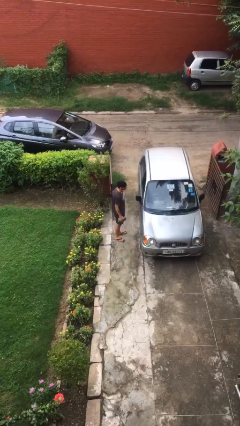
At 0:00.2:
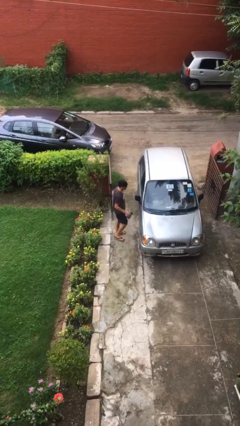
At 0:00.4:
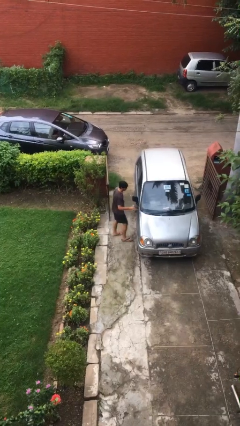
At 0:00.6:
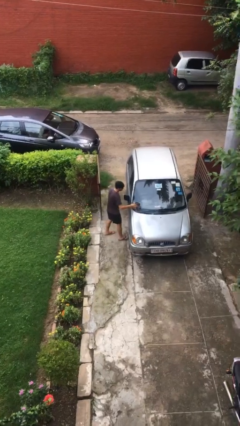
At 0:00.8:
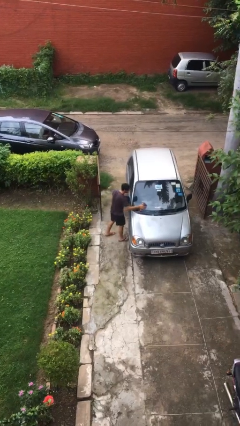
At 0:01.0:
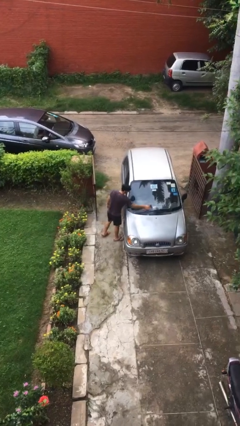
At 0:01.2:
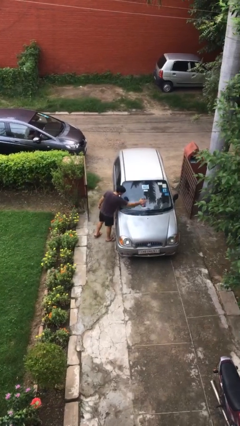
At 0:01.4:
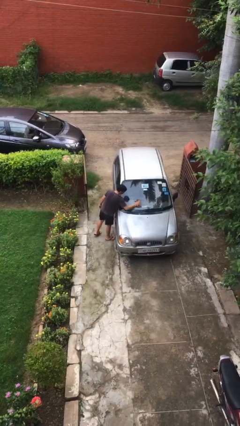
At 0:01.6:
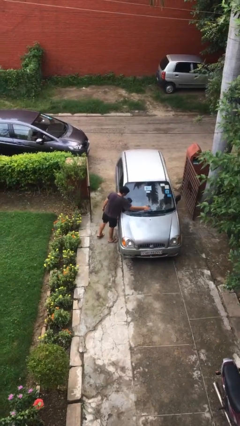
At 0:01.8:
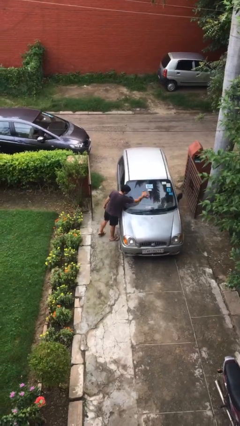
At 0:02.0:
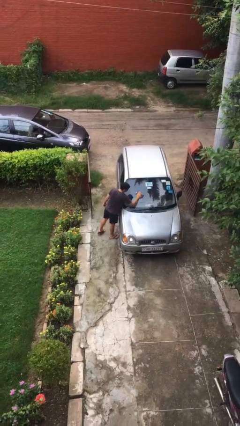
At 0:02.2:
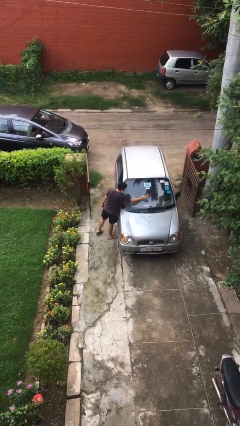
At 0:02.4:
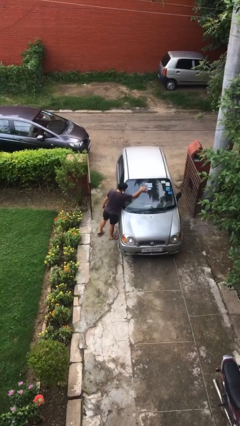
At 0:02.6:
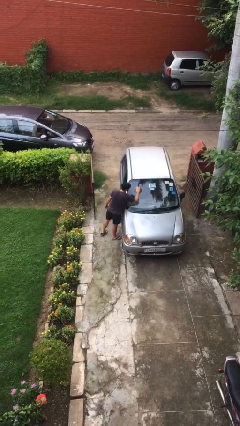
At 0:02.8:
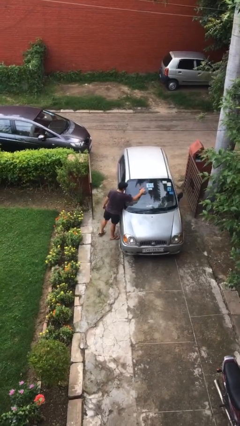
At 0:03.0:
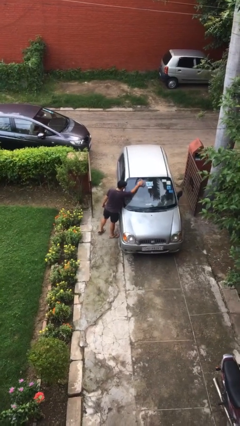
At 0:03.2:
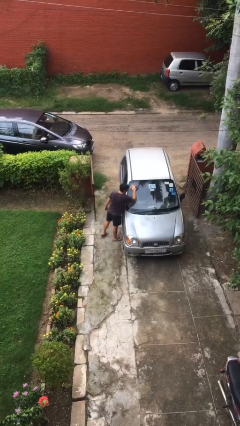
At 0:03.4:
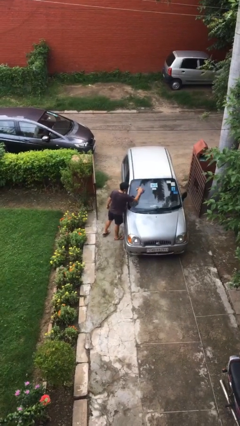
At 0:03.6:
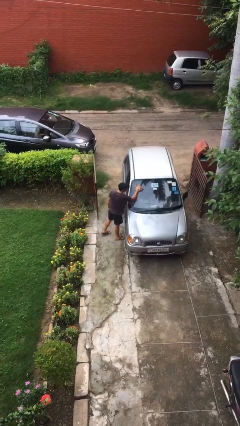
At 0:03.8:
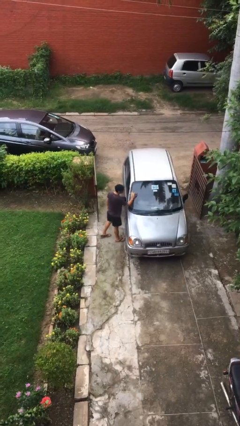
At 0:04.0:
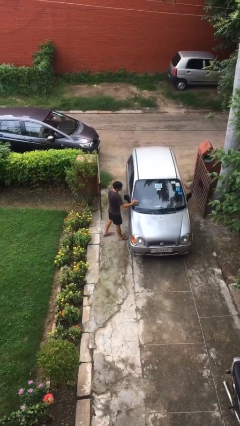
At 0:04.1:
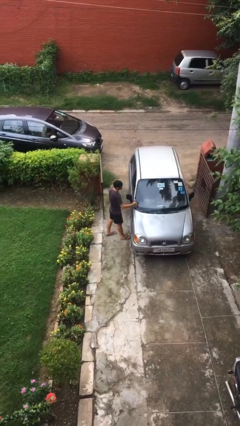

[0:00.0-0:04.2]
person polishes car with rag

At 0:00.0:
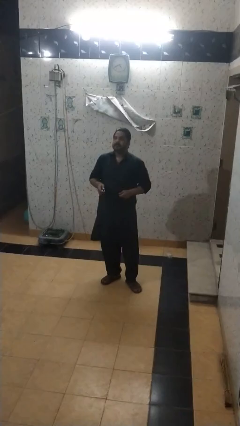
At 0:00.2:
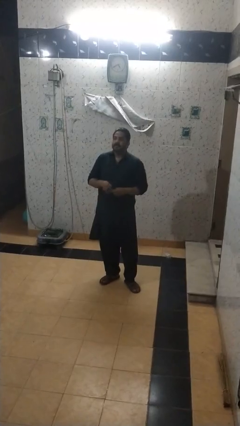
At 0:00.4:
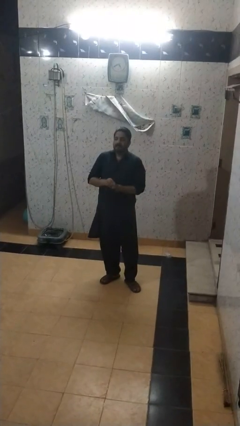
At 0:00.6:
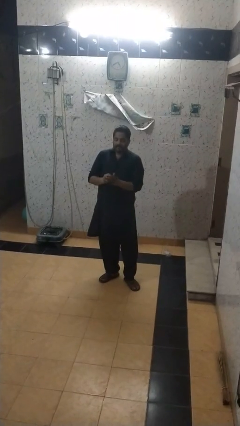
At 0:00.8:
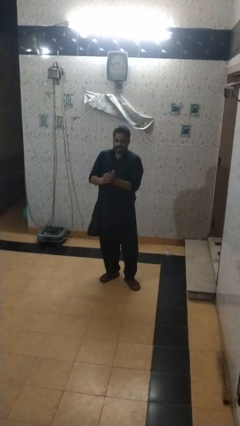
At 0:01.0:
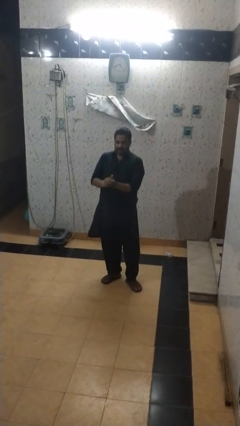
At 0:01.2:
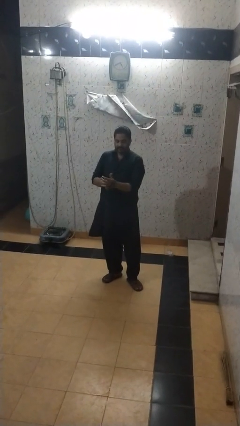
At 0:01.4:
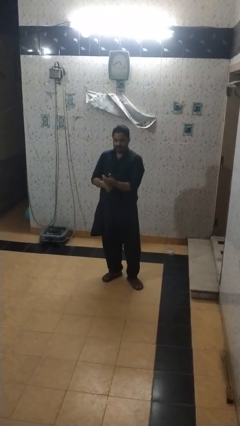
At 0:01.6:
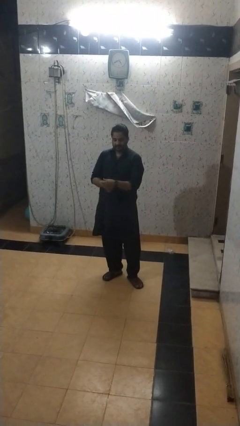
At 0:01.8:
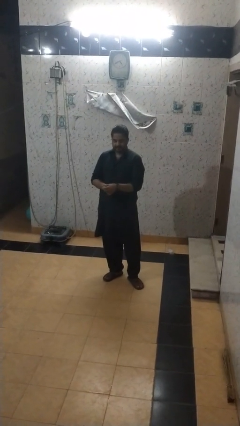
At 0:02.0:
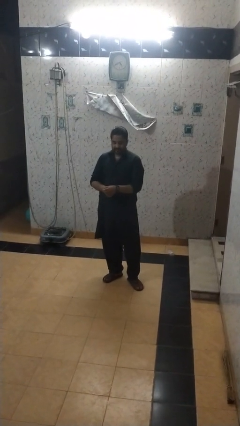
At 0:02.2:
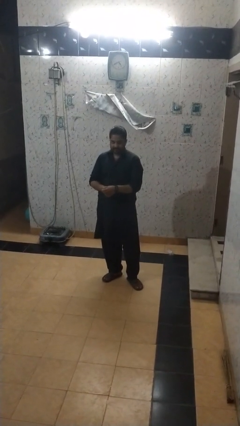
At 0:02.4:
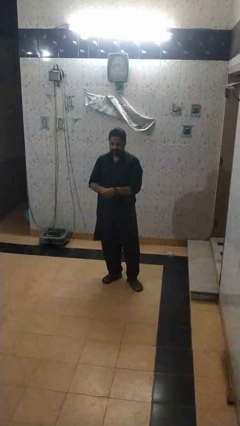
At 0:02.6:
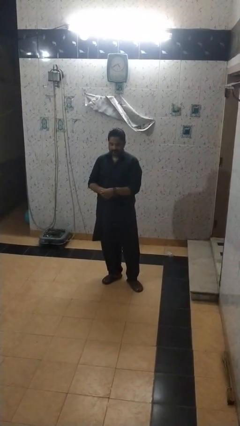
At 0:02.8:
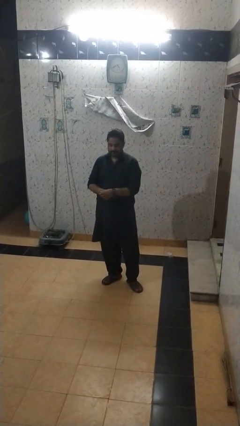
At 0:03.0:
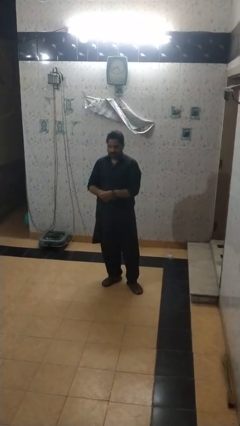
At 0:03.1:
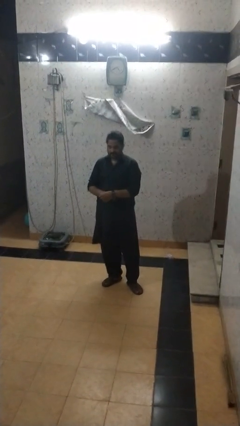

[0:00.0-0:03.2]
person puts on wristwatch

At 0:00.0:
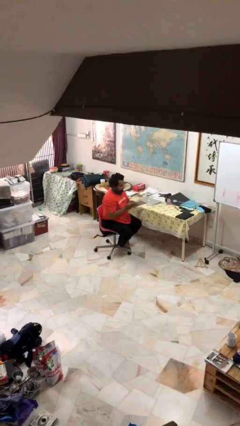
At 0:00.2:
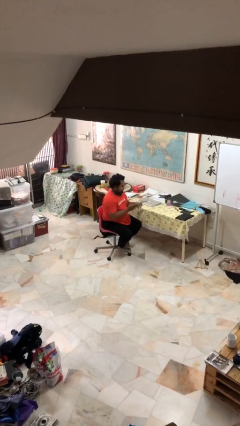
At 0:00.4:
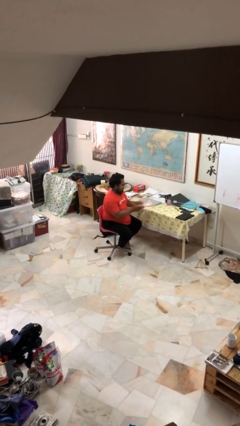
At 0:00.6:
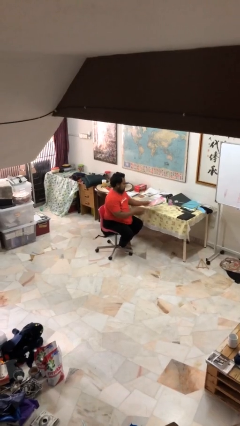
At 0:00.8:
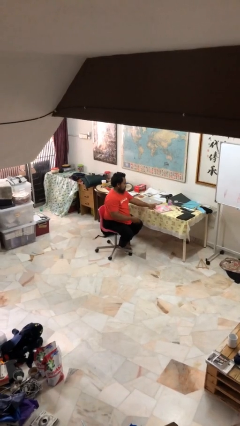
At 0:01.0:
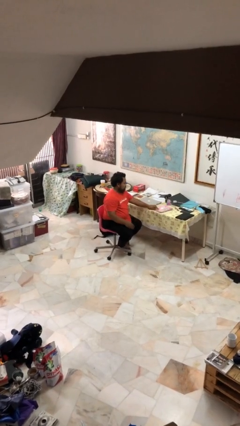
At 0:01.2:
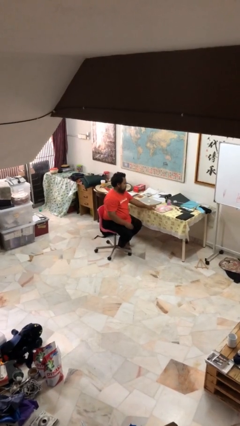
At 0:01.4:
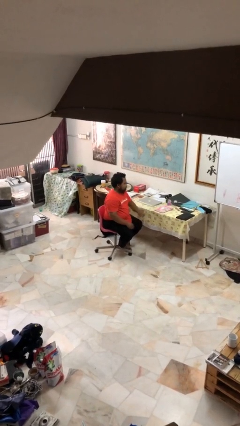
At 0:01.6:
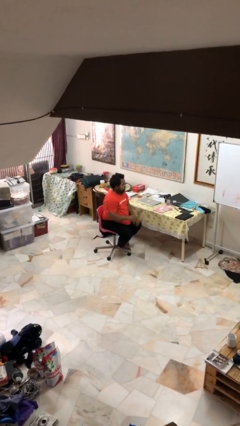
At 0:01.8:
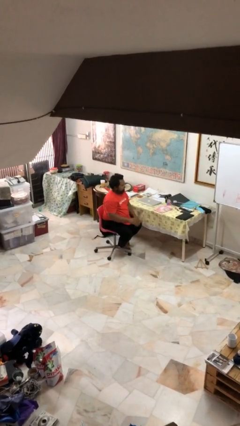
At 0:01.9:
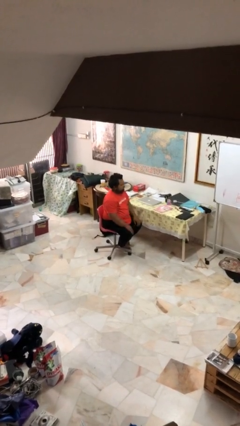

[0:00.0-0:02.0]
person puts down object on table

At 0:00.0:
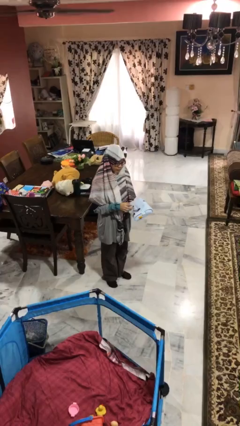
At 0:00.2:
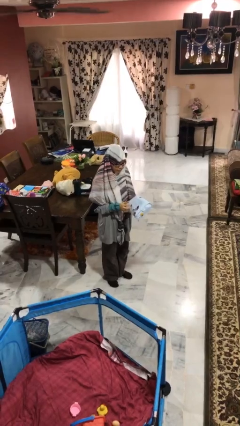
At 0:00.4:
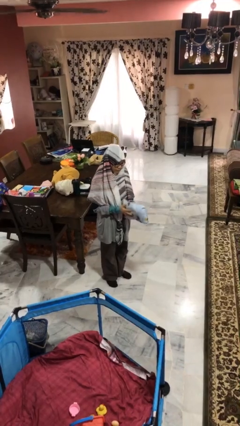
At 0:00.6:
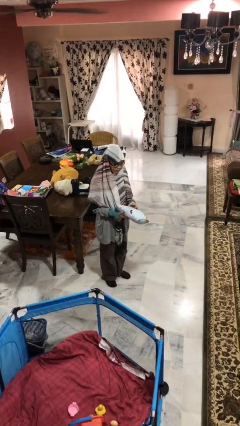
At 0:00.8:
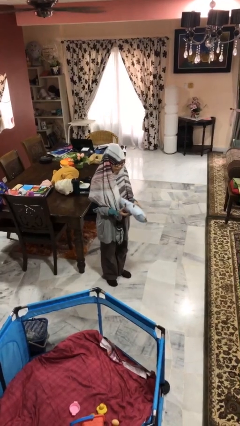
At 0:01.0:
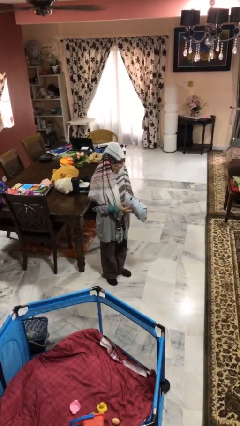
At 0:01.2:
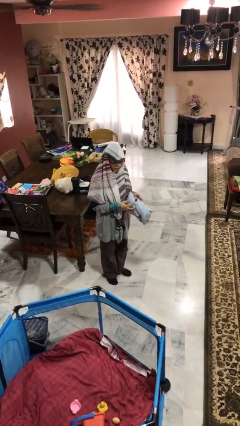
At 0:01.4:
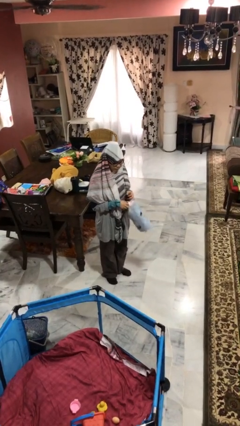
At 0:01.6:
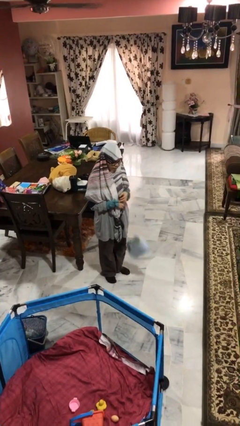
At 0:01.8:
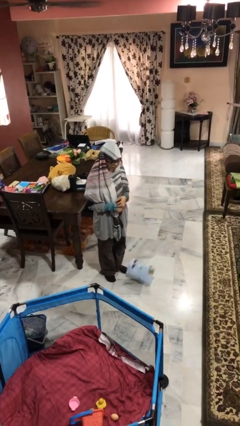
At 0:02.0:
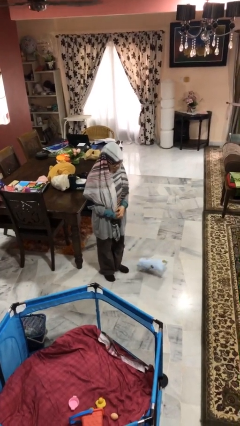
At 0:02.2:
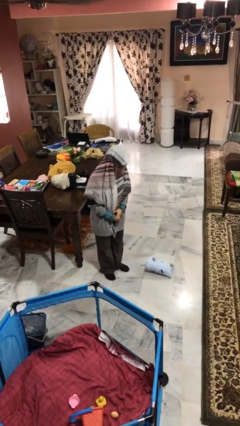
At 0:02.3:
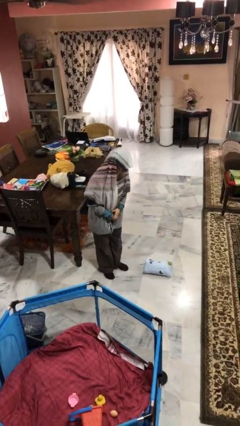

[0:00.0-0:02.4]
person drops object

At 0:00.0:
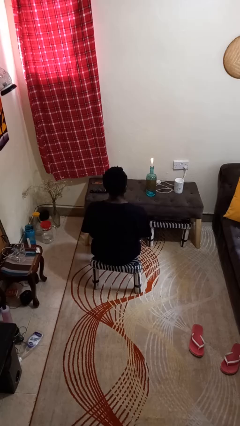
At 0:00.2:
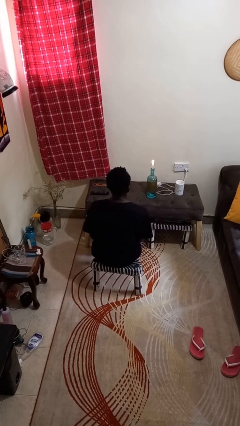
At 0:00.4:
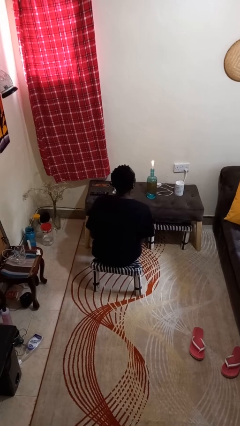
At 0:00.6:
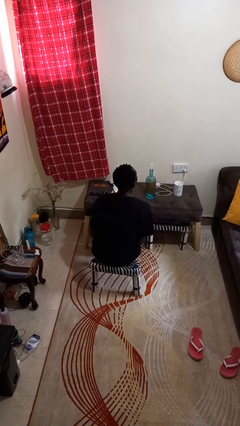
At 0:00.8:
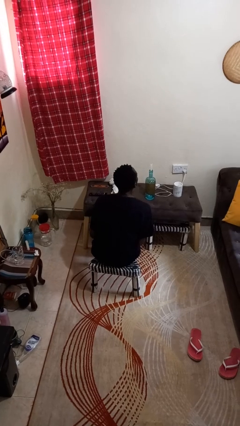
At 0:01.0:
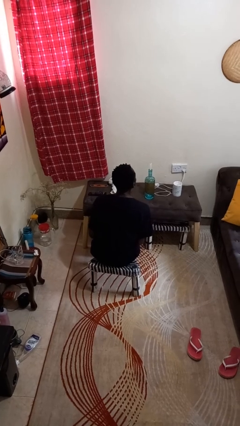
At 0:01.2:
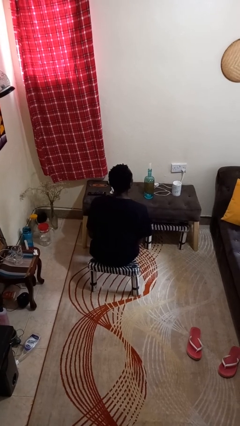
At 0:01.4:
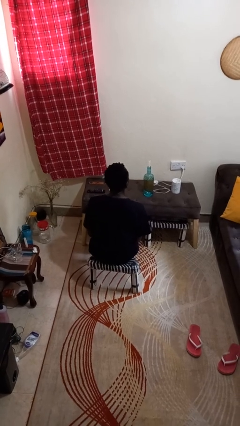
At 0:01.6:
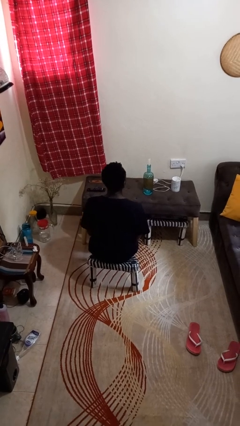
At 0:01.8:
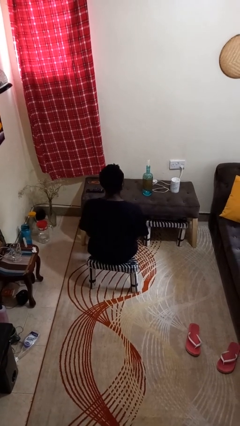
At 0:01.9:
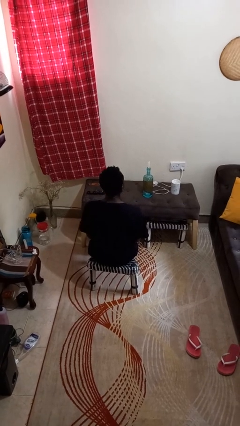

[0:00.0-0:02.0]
person extinguishes candle

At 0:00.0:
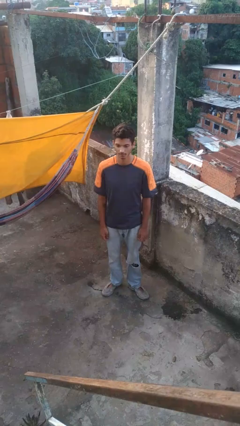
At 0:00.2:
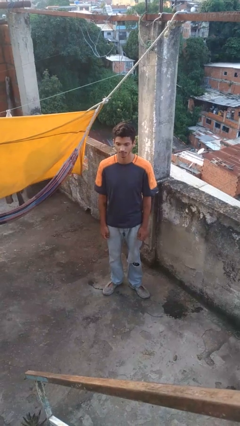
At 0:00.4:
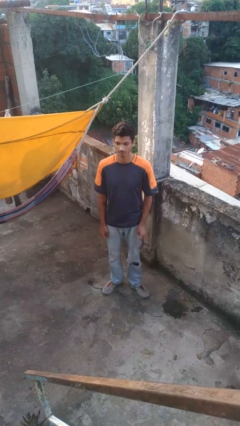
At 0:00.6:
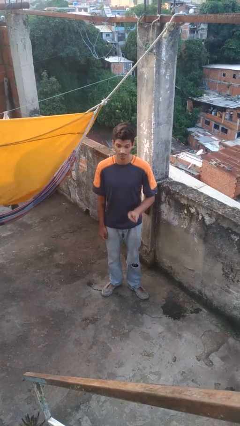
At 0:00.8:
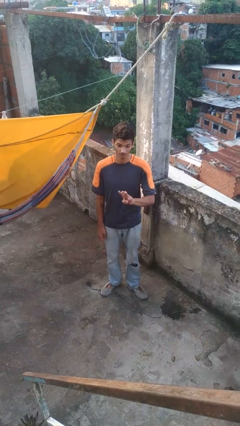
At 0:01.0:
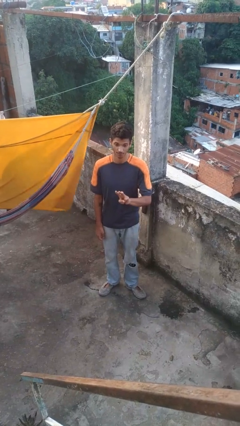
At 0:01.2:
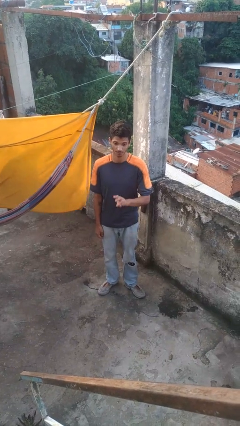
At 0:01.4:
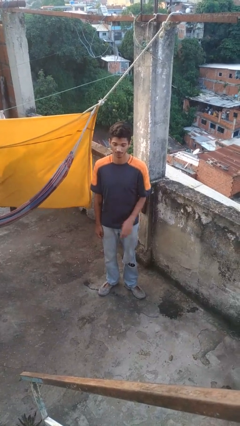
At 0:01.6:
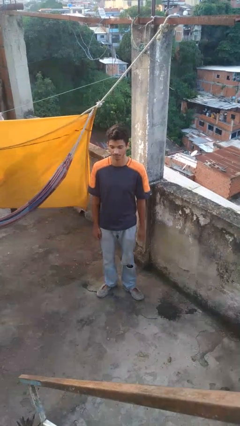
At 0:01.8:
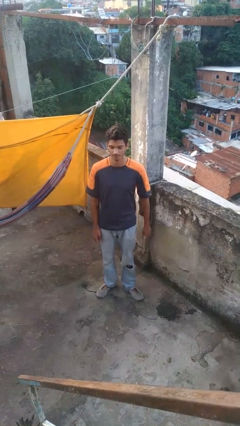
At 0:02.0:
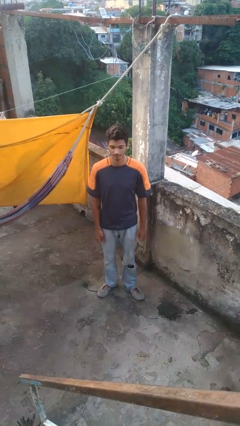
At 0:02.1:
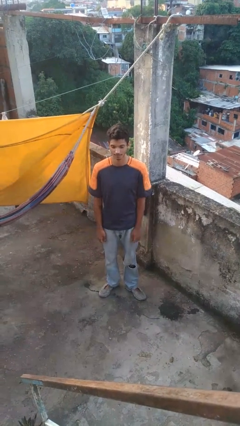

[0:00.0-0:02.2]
person gestures number three

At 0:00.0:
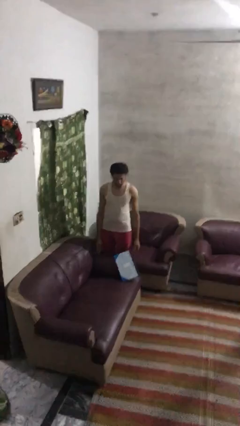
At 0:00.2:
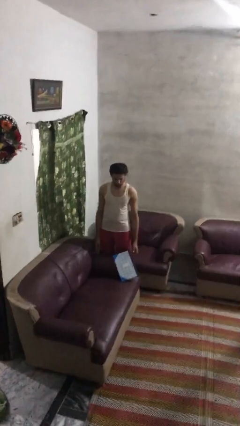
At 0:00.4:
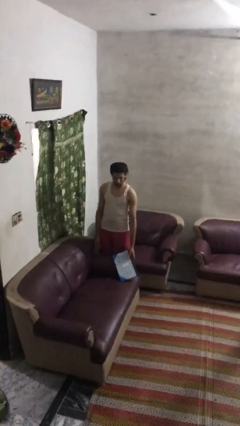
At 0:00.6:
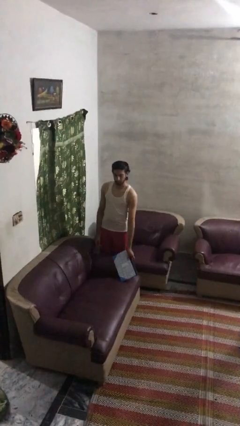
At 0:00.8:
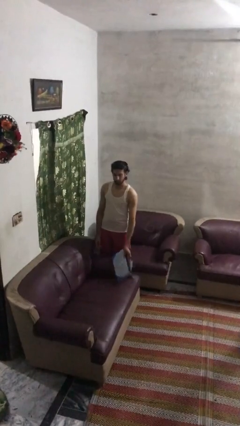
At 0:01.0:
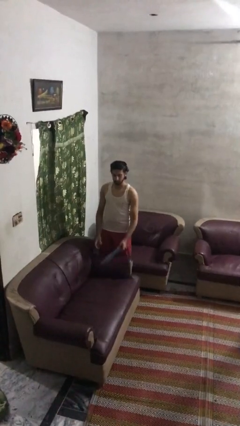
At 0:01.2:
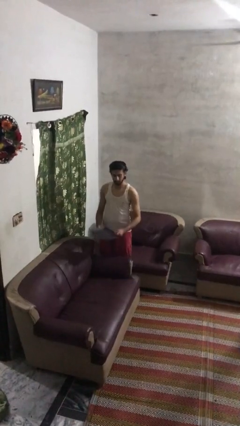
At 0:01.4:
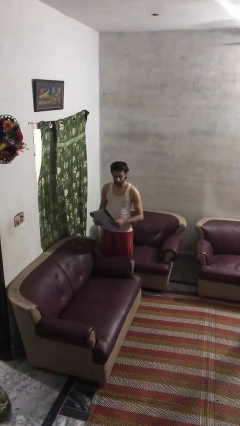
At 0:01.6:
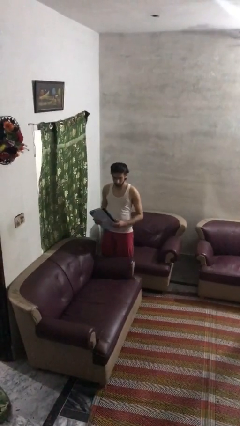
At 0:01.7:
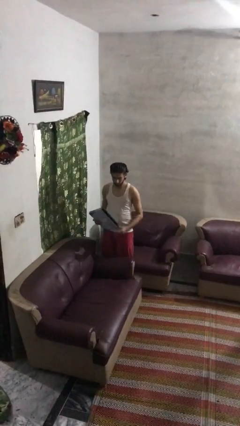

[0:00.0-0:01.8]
person picks up object from couch
